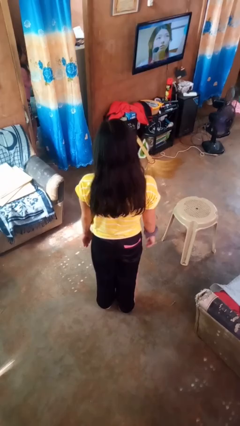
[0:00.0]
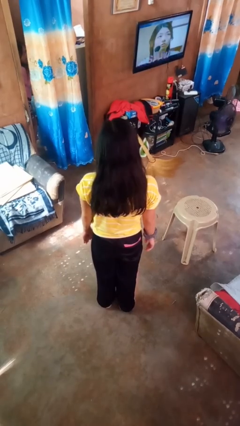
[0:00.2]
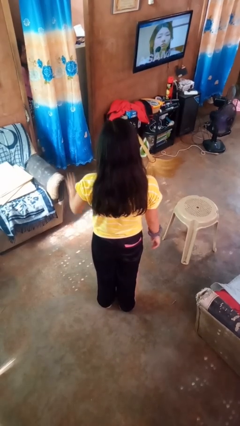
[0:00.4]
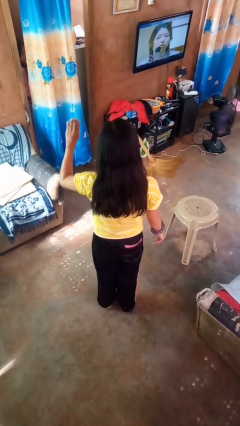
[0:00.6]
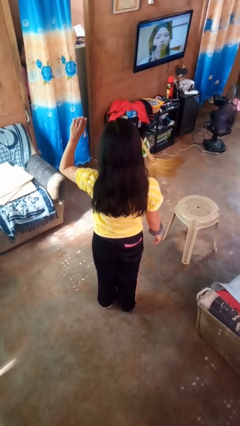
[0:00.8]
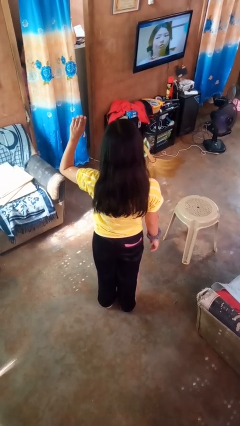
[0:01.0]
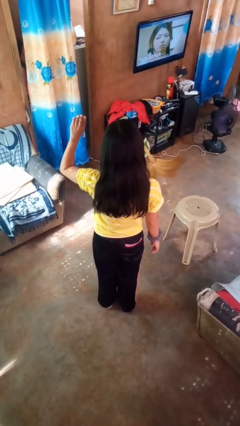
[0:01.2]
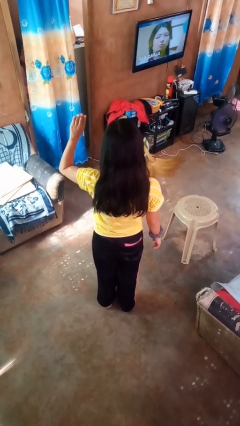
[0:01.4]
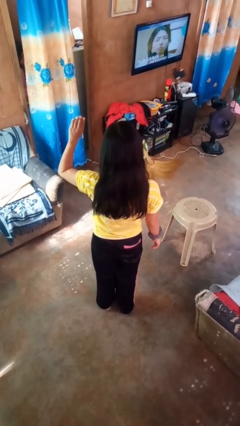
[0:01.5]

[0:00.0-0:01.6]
person gestures number four

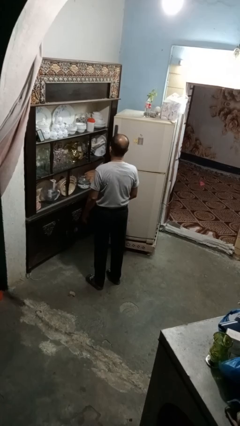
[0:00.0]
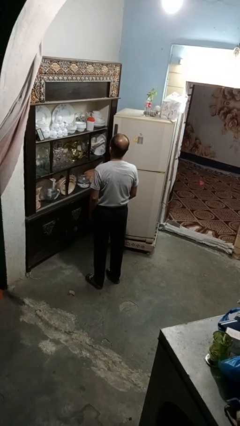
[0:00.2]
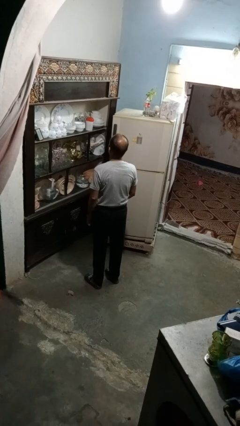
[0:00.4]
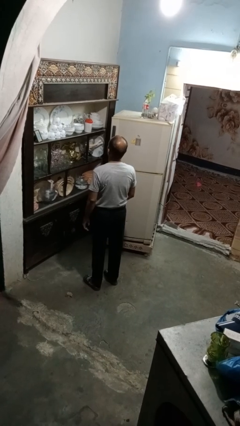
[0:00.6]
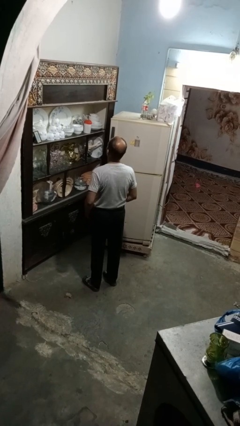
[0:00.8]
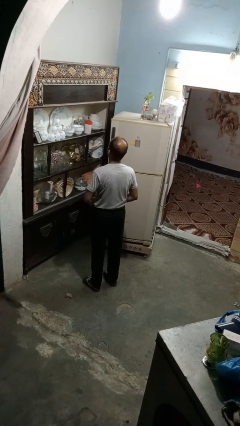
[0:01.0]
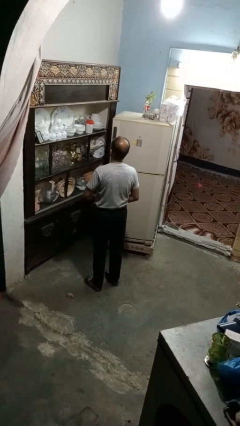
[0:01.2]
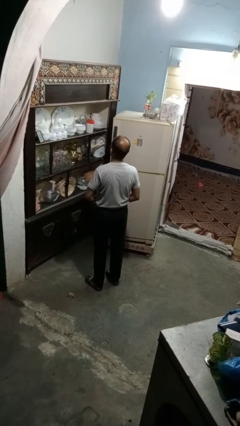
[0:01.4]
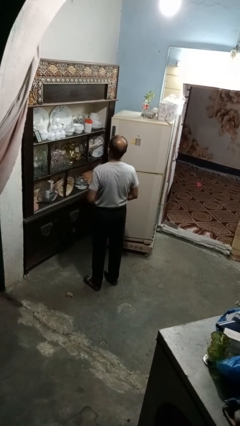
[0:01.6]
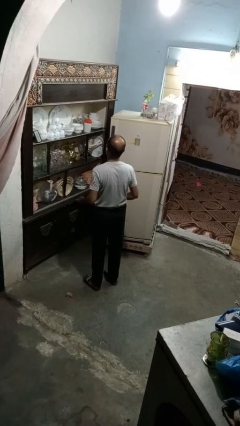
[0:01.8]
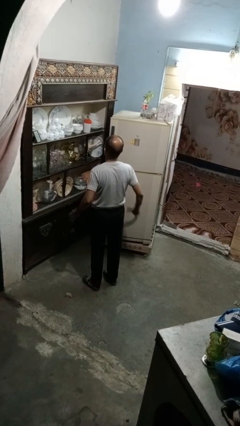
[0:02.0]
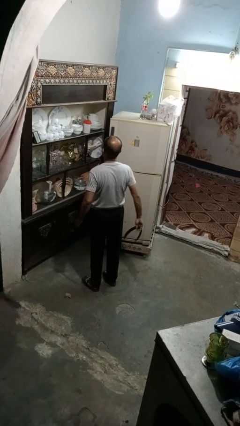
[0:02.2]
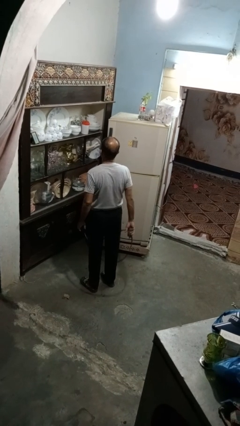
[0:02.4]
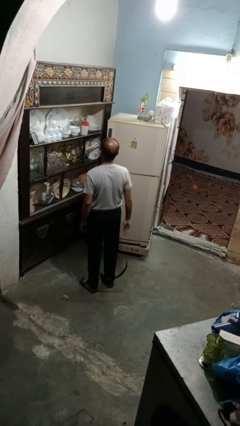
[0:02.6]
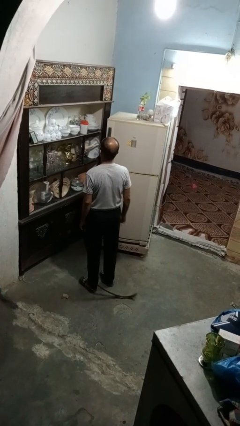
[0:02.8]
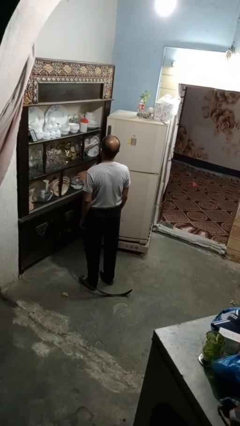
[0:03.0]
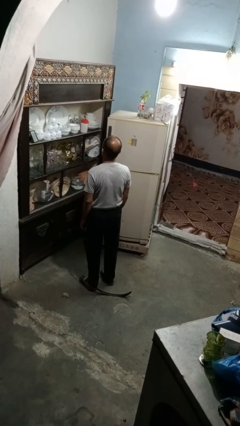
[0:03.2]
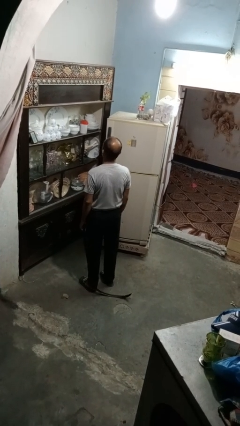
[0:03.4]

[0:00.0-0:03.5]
person takes off belt

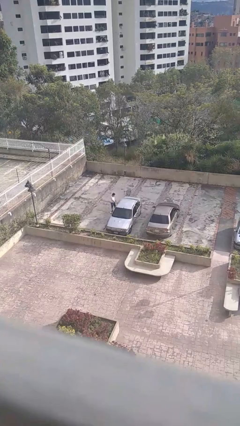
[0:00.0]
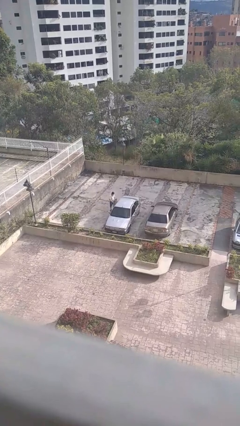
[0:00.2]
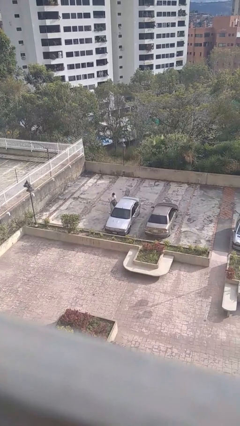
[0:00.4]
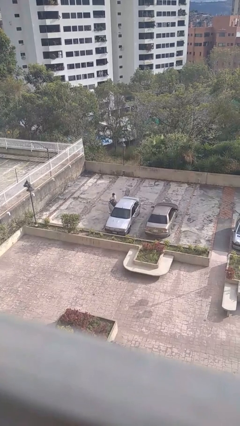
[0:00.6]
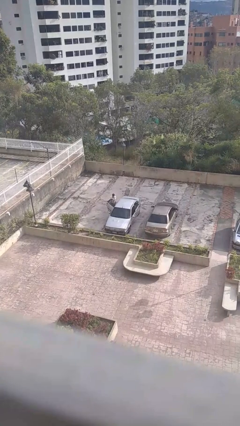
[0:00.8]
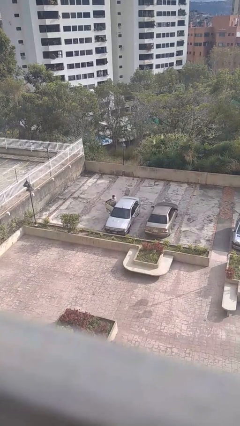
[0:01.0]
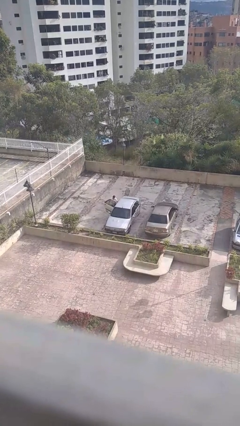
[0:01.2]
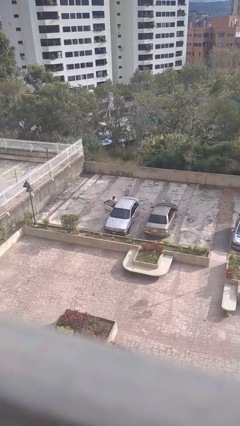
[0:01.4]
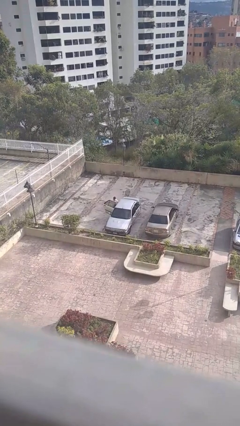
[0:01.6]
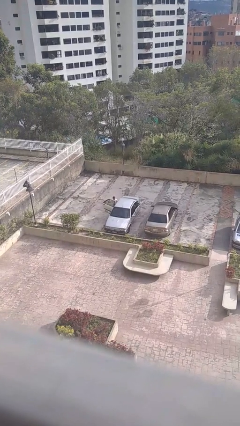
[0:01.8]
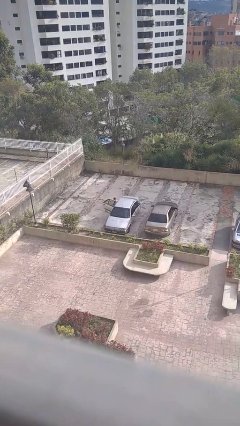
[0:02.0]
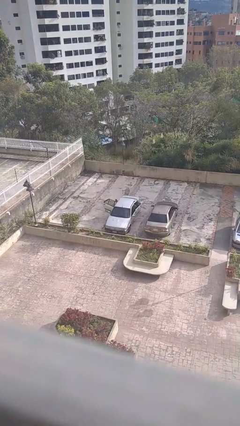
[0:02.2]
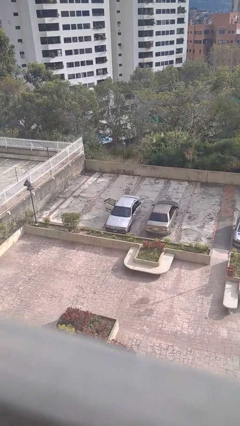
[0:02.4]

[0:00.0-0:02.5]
car picks up person

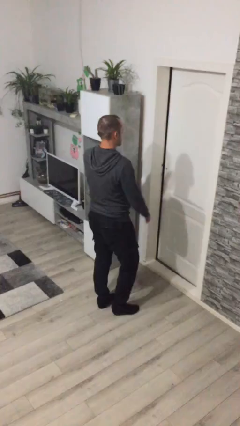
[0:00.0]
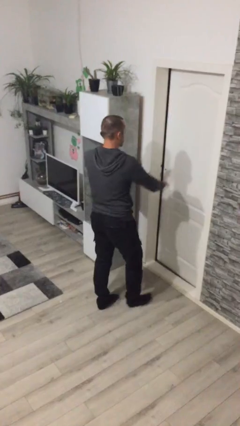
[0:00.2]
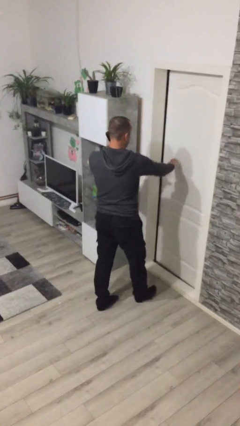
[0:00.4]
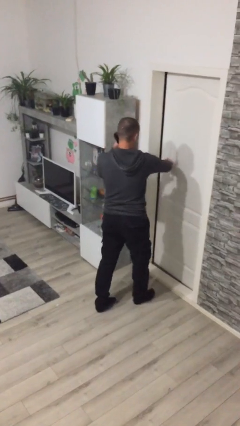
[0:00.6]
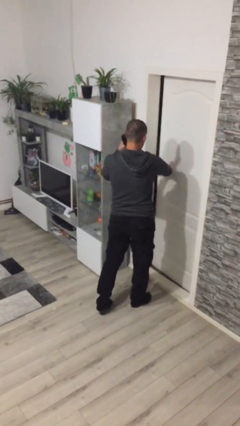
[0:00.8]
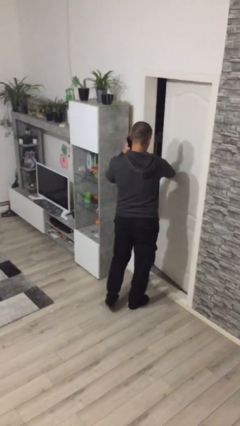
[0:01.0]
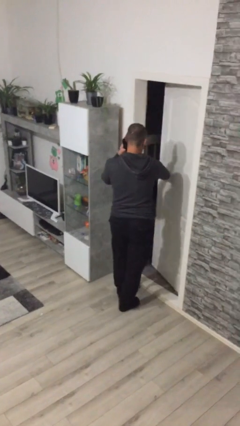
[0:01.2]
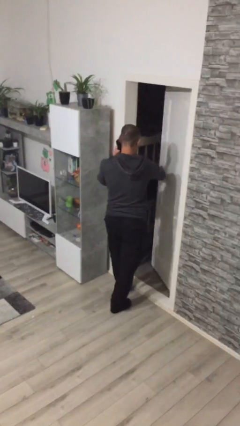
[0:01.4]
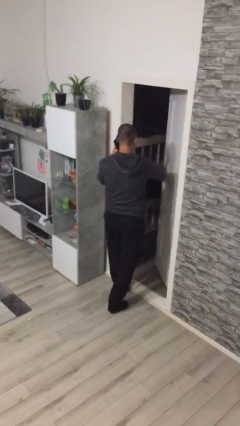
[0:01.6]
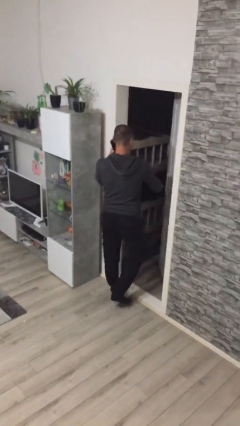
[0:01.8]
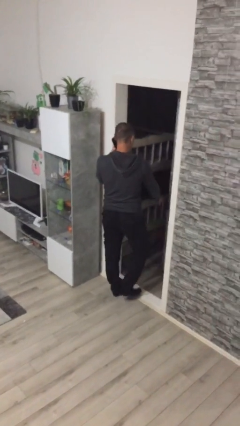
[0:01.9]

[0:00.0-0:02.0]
person opens facility door

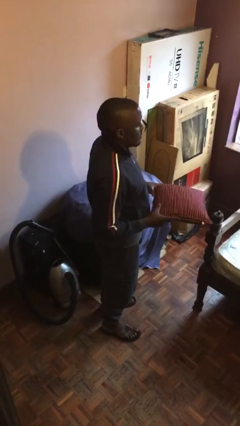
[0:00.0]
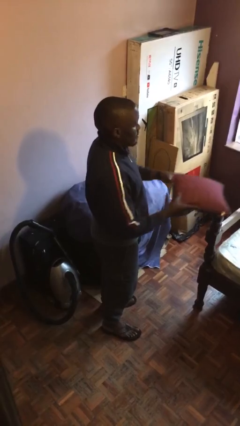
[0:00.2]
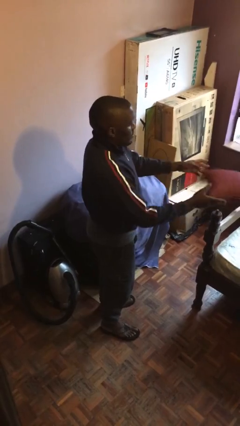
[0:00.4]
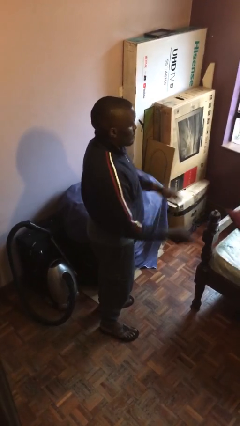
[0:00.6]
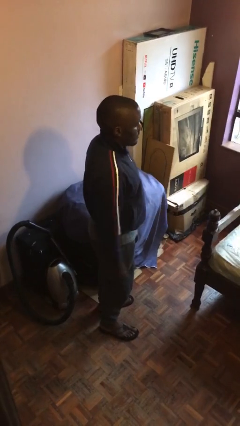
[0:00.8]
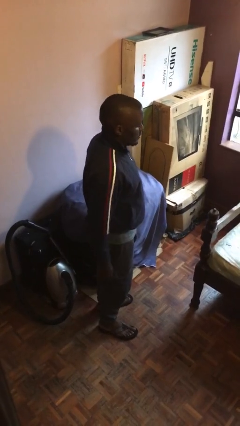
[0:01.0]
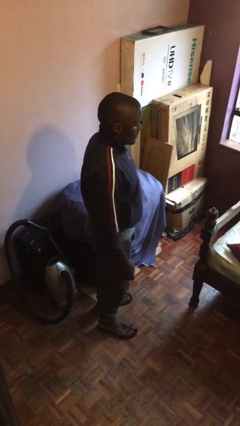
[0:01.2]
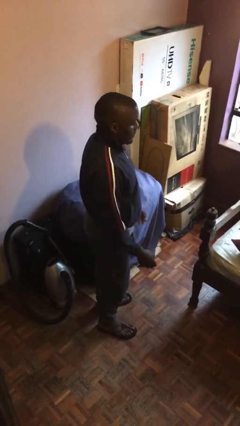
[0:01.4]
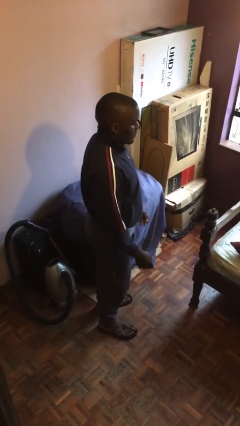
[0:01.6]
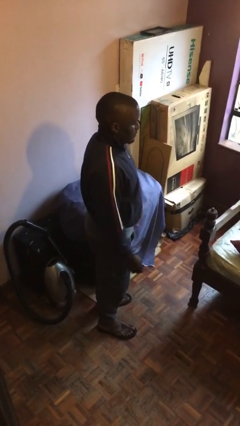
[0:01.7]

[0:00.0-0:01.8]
person throws object on bed

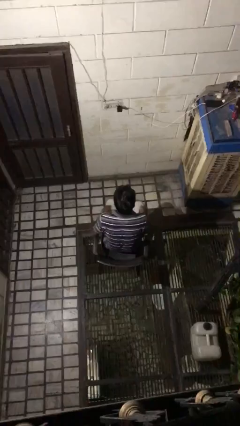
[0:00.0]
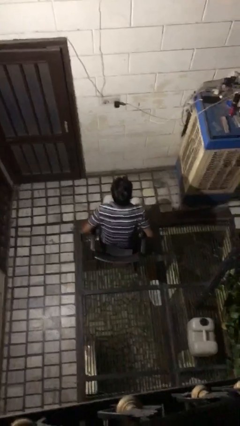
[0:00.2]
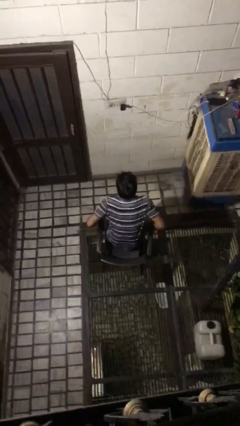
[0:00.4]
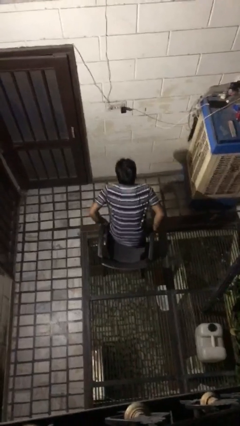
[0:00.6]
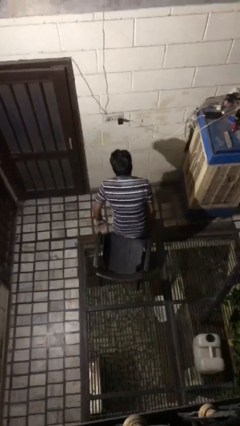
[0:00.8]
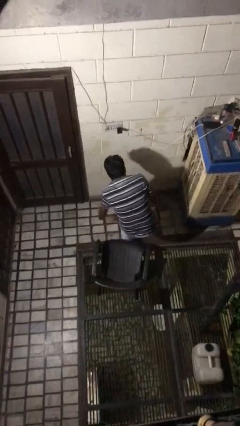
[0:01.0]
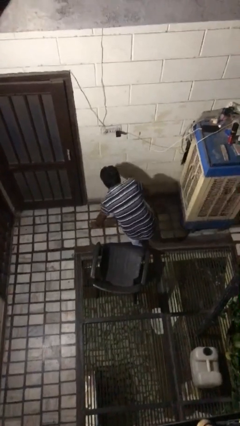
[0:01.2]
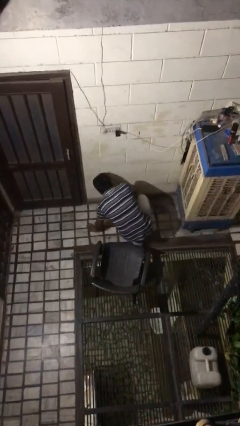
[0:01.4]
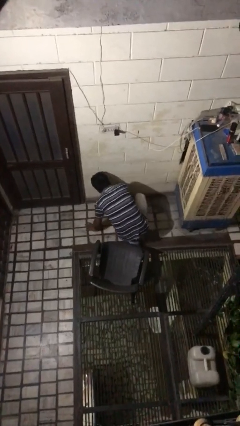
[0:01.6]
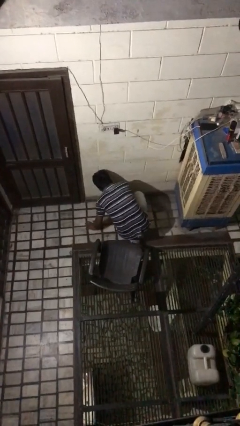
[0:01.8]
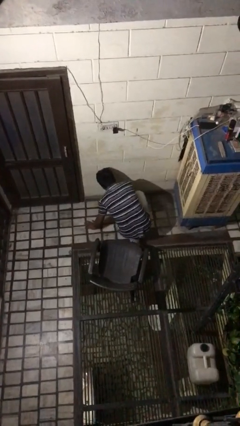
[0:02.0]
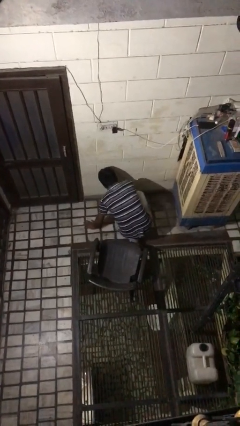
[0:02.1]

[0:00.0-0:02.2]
person falls from chair

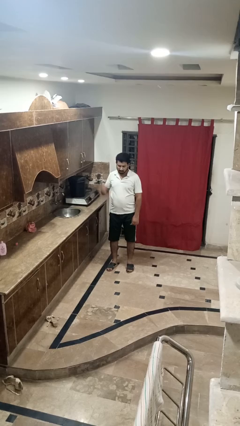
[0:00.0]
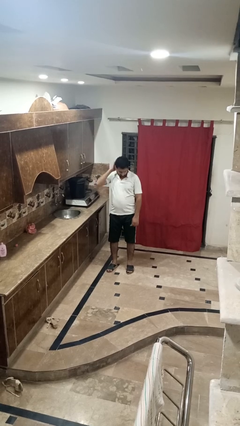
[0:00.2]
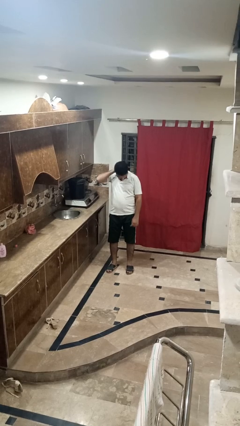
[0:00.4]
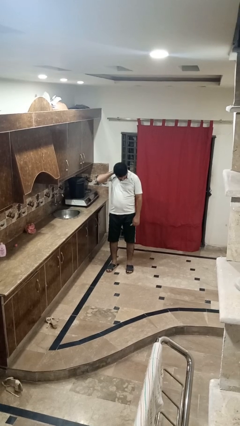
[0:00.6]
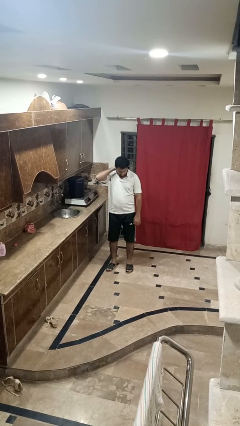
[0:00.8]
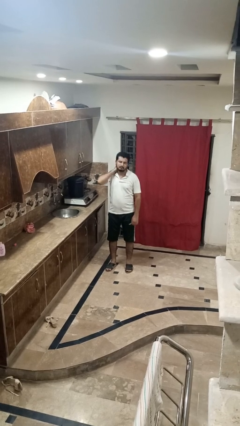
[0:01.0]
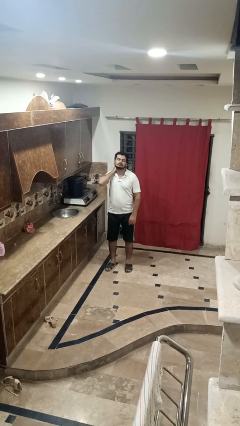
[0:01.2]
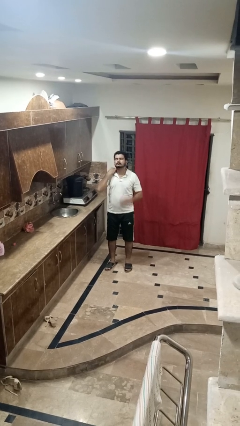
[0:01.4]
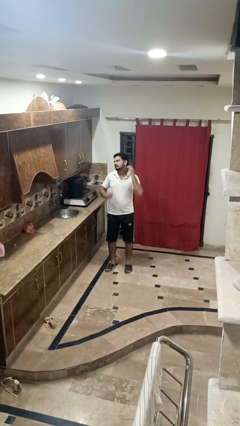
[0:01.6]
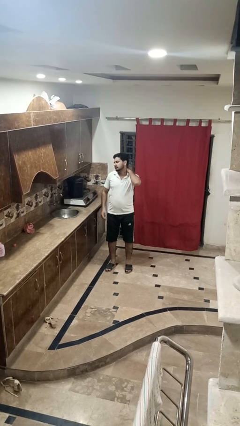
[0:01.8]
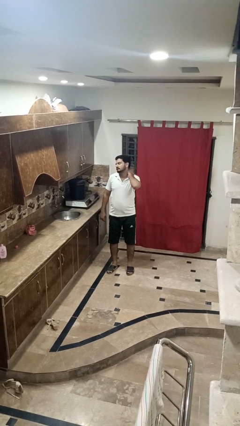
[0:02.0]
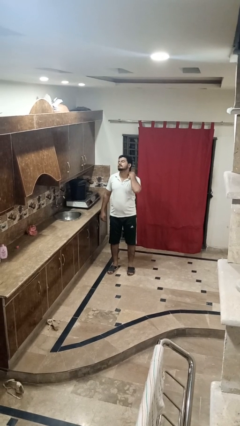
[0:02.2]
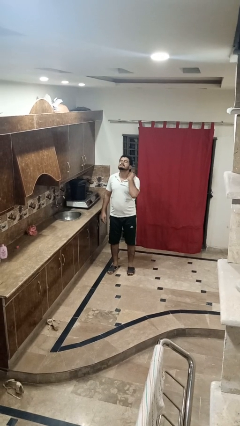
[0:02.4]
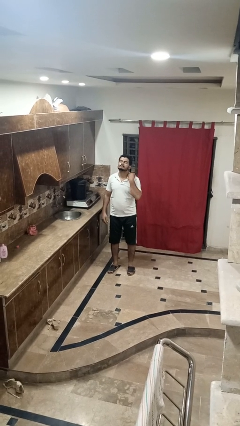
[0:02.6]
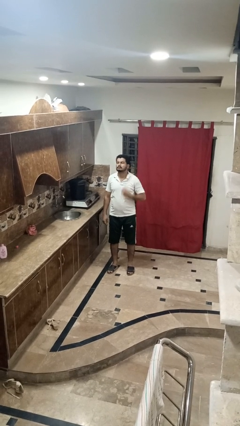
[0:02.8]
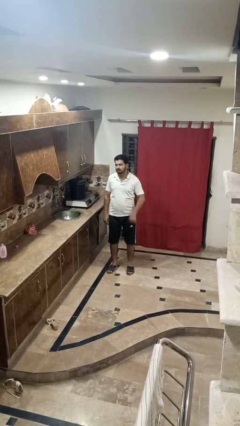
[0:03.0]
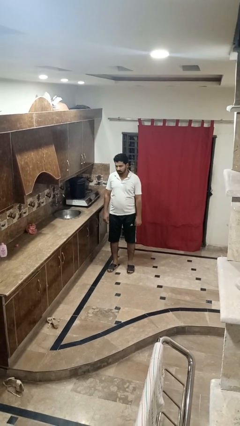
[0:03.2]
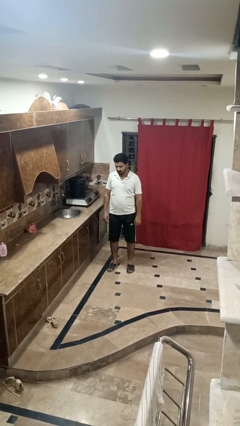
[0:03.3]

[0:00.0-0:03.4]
person rubs neck
